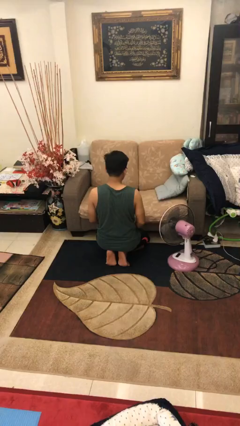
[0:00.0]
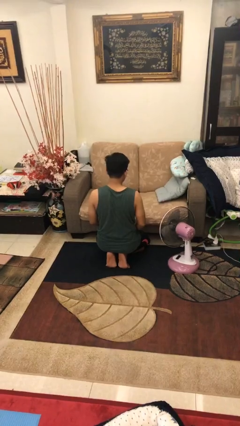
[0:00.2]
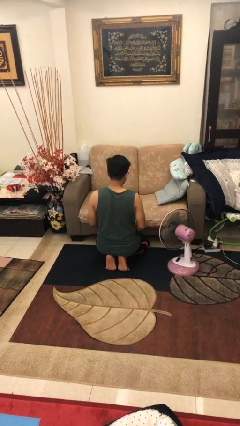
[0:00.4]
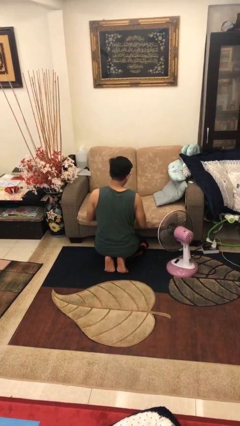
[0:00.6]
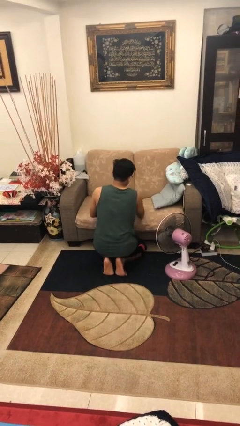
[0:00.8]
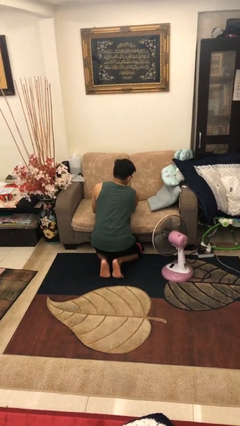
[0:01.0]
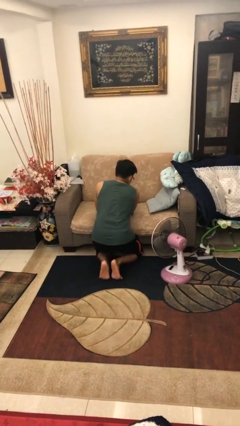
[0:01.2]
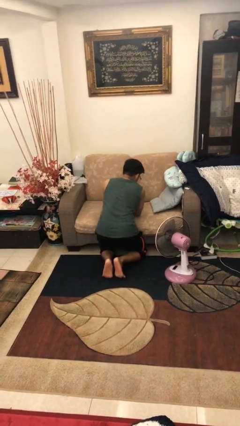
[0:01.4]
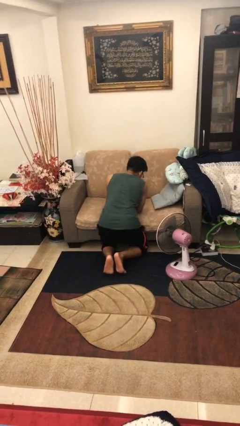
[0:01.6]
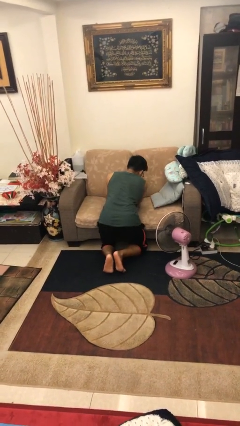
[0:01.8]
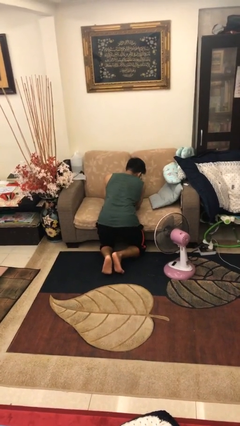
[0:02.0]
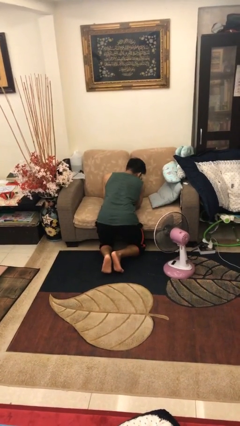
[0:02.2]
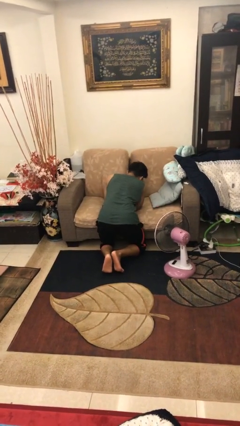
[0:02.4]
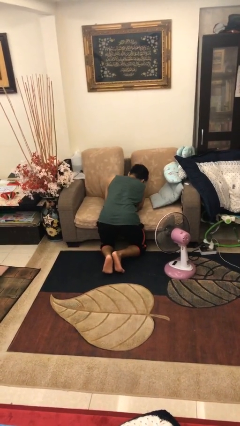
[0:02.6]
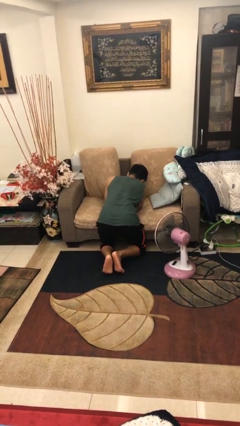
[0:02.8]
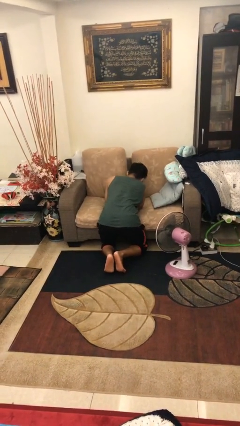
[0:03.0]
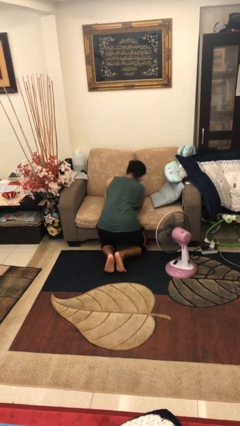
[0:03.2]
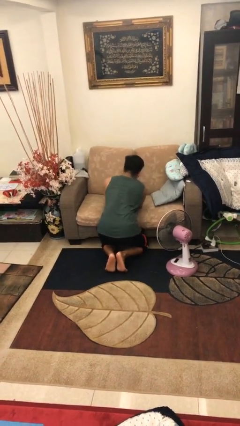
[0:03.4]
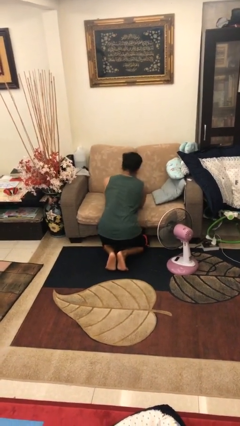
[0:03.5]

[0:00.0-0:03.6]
person searches in couch

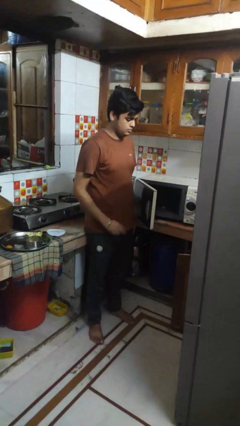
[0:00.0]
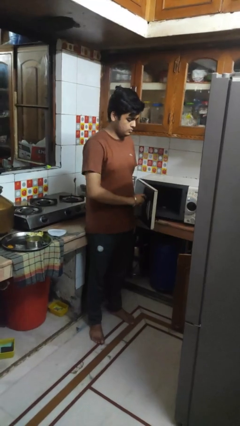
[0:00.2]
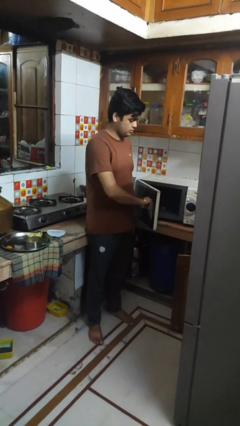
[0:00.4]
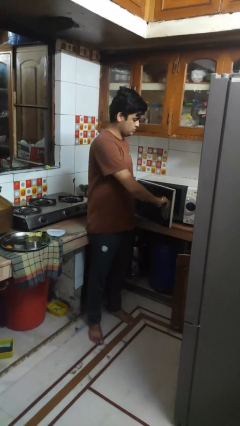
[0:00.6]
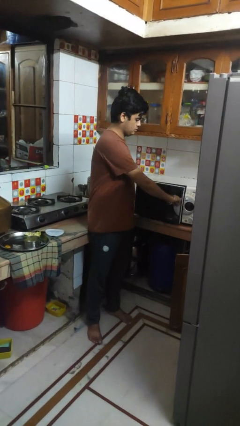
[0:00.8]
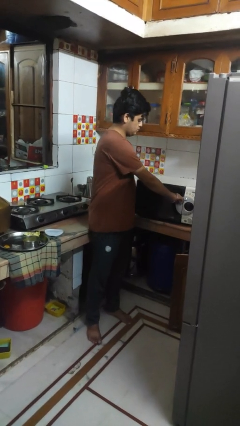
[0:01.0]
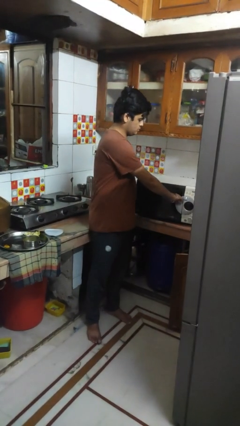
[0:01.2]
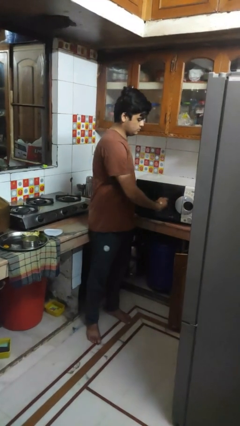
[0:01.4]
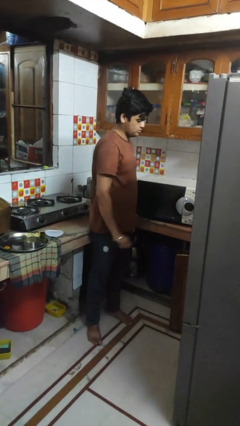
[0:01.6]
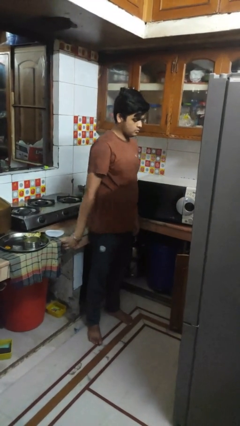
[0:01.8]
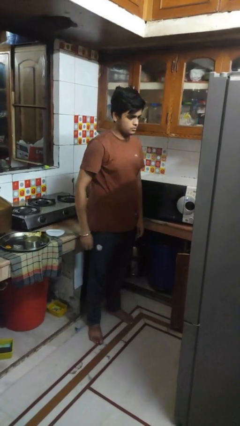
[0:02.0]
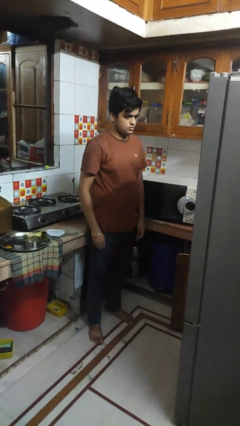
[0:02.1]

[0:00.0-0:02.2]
person closes oven door

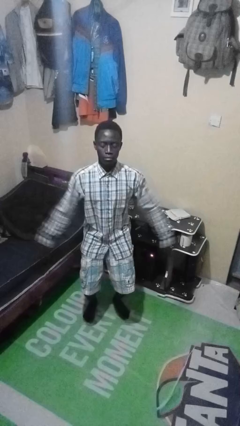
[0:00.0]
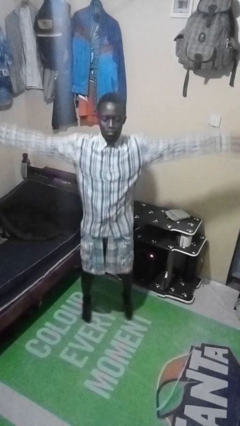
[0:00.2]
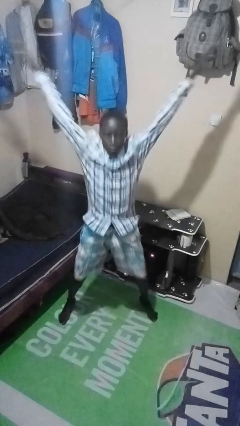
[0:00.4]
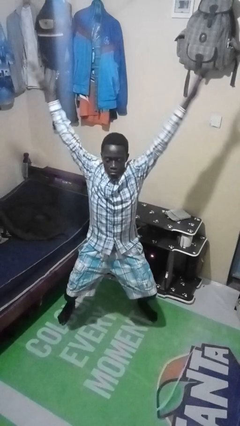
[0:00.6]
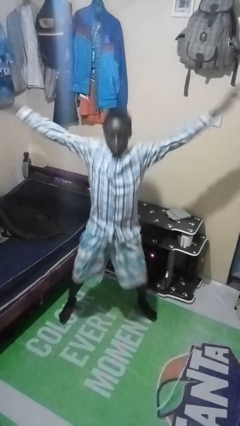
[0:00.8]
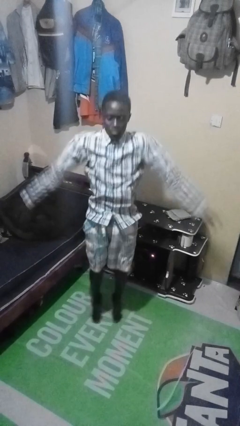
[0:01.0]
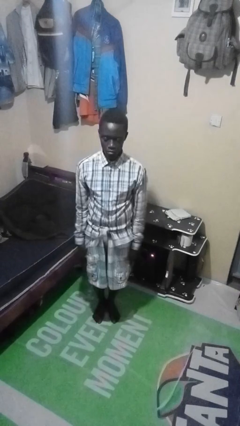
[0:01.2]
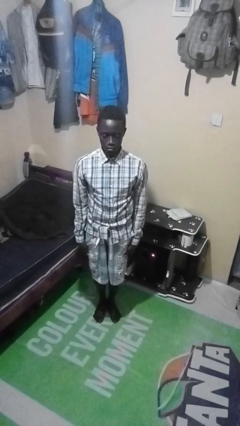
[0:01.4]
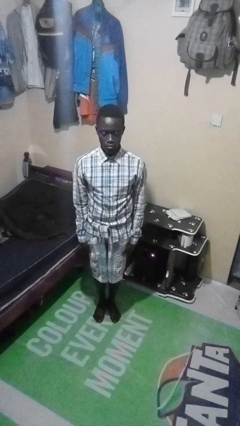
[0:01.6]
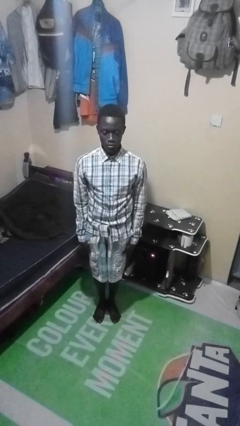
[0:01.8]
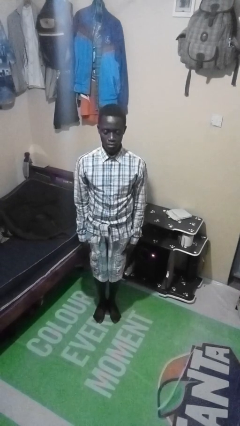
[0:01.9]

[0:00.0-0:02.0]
person exercises with jumping jacks

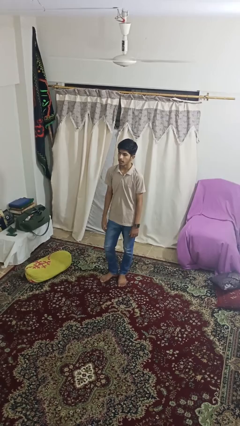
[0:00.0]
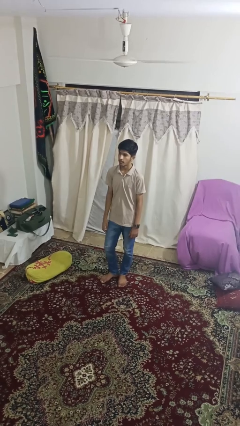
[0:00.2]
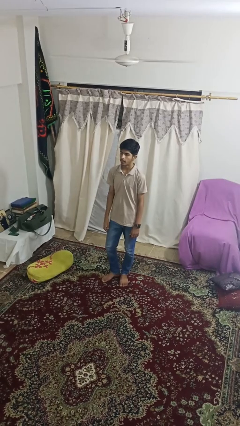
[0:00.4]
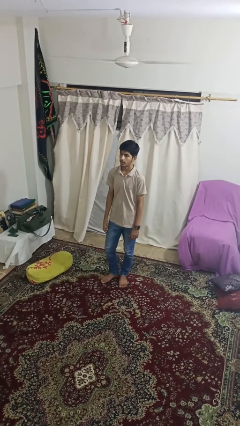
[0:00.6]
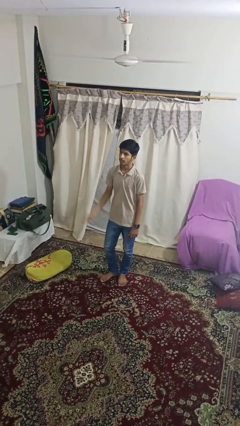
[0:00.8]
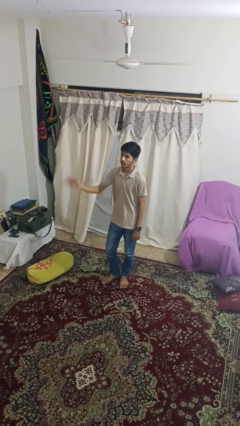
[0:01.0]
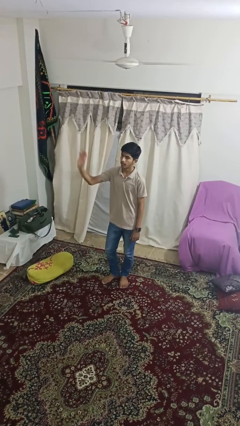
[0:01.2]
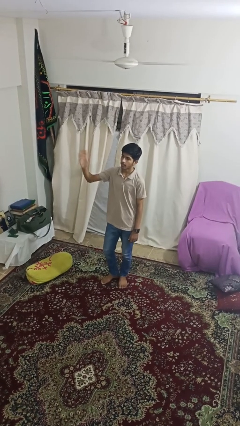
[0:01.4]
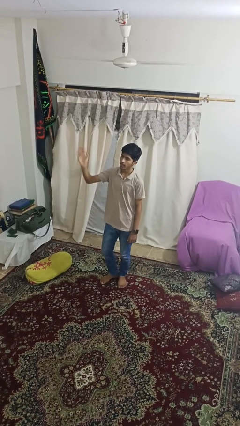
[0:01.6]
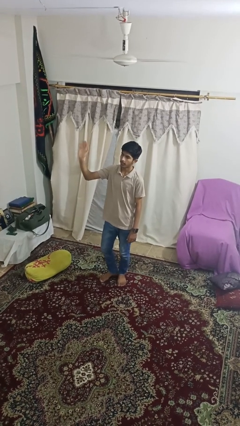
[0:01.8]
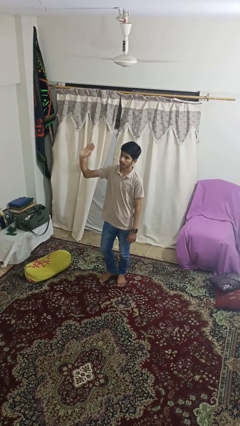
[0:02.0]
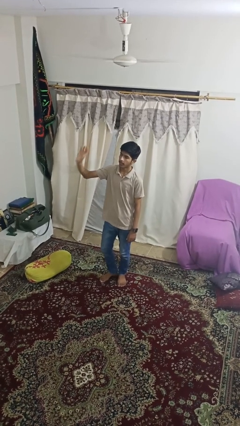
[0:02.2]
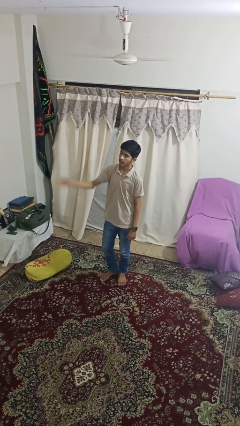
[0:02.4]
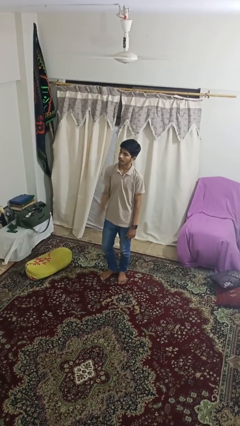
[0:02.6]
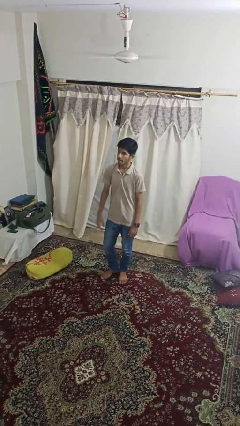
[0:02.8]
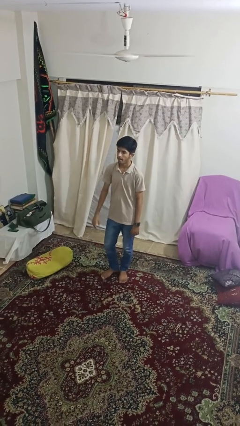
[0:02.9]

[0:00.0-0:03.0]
person waves at person

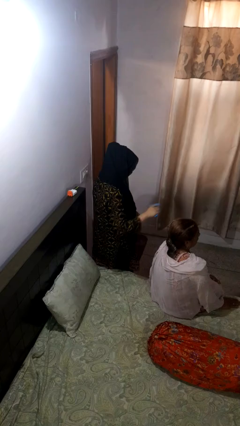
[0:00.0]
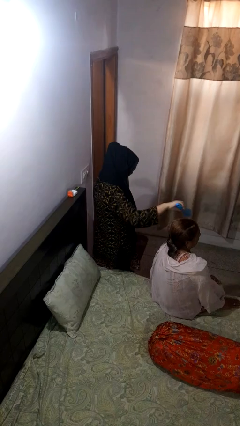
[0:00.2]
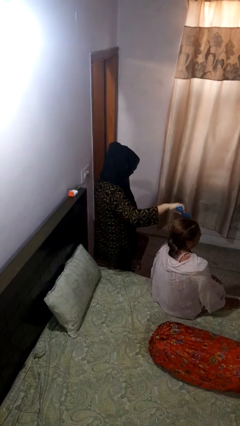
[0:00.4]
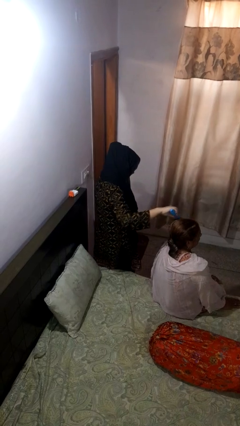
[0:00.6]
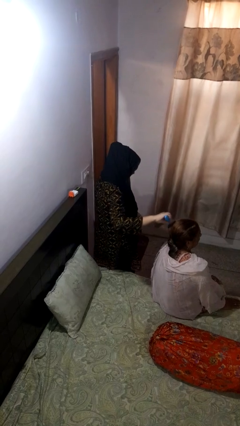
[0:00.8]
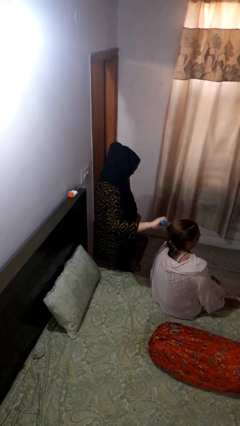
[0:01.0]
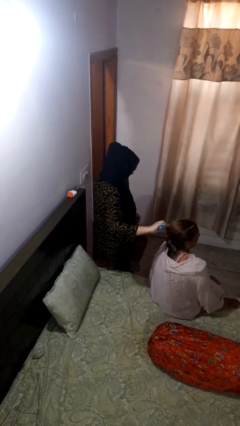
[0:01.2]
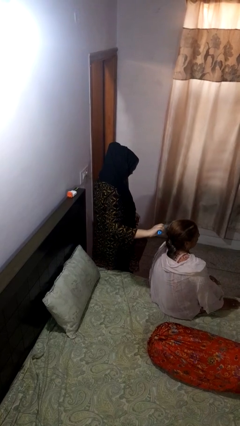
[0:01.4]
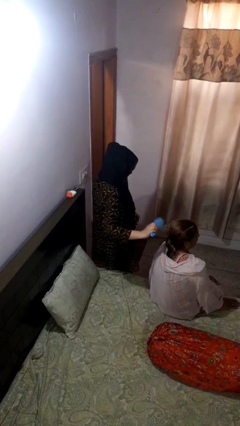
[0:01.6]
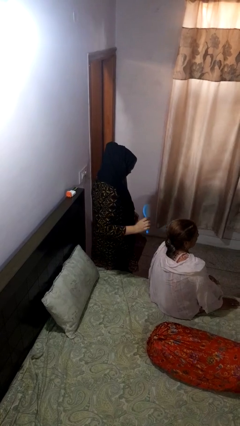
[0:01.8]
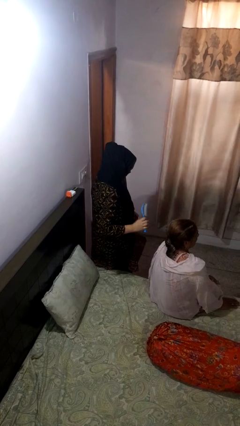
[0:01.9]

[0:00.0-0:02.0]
person brushes hair of person

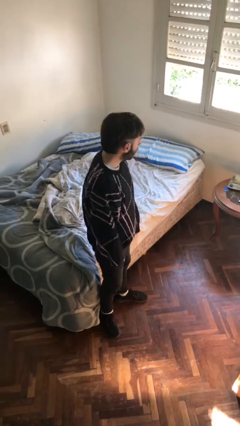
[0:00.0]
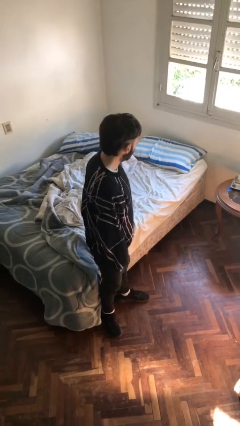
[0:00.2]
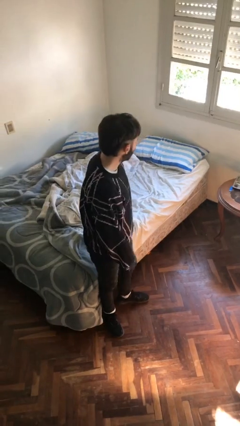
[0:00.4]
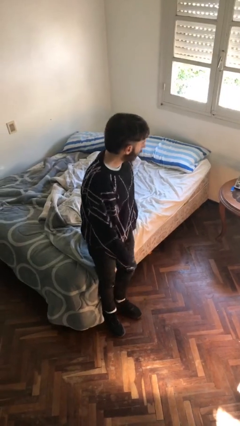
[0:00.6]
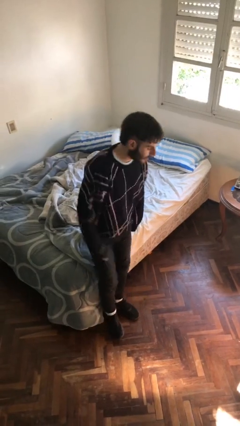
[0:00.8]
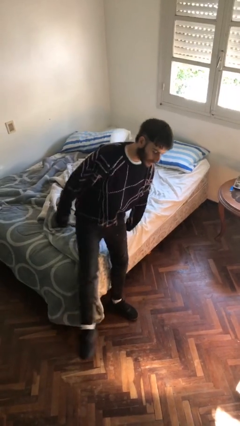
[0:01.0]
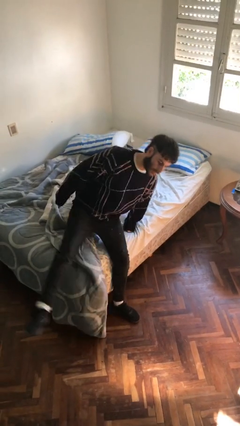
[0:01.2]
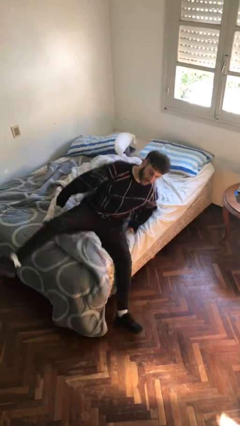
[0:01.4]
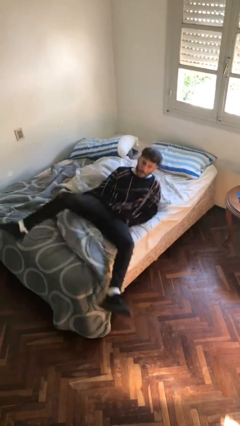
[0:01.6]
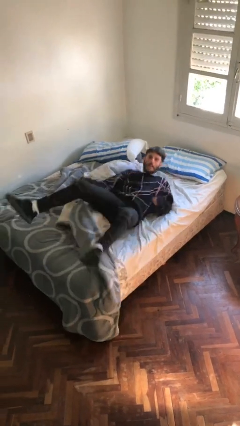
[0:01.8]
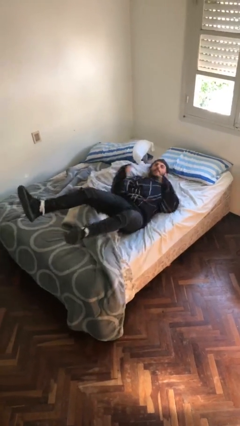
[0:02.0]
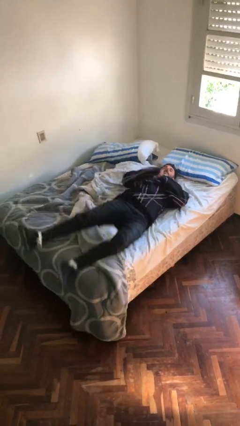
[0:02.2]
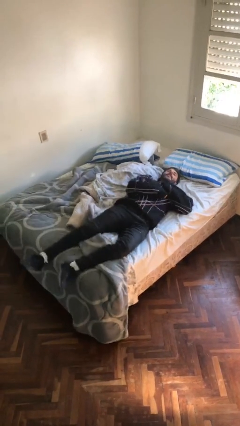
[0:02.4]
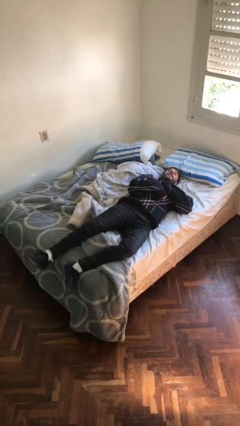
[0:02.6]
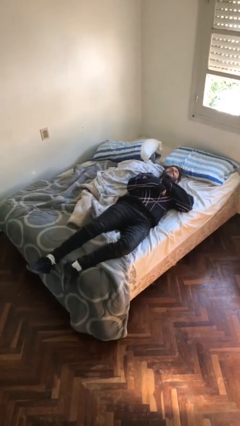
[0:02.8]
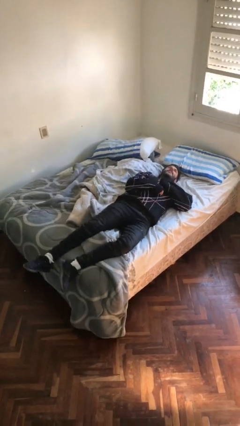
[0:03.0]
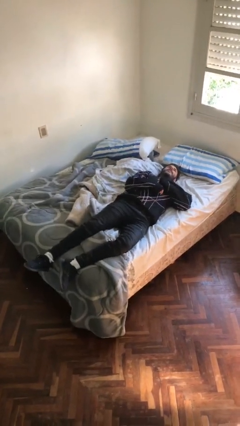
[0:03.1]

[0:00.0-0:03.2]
person lies down on bed

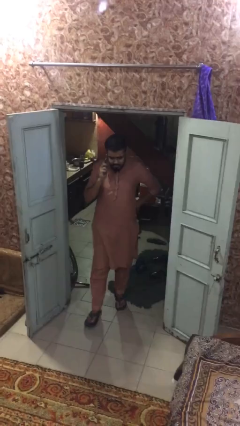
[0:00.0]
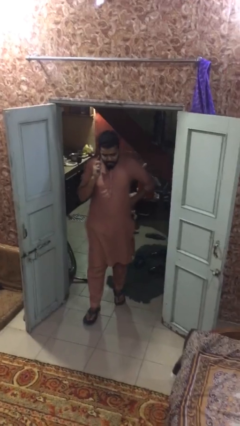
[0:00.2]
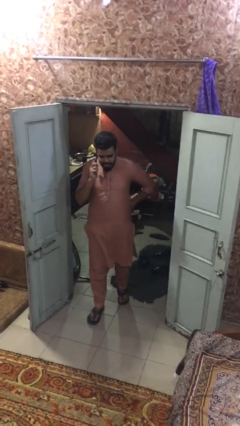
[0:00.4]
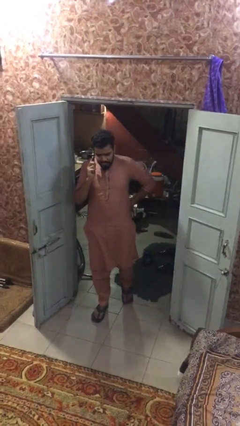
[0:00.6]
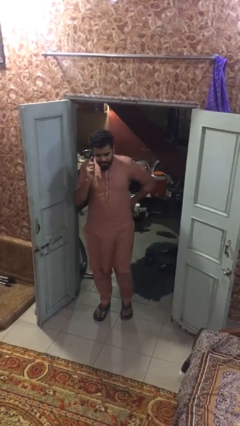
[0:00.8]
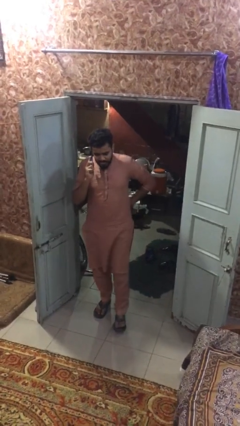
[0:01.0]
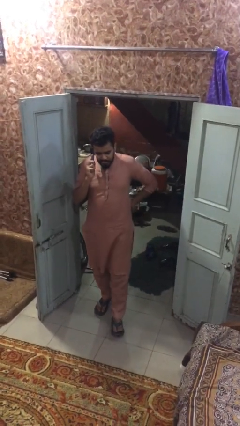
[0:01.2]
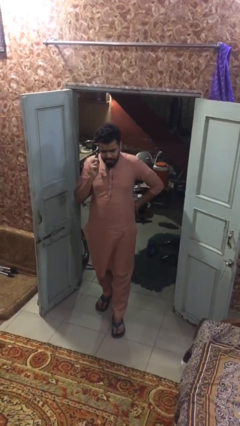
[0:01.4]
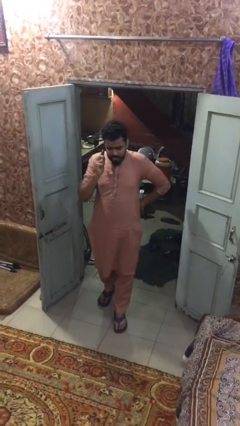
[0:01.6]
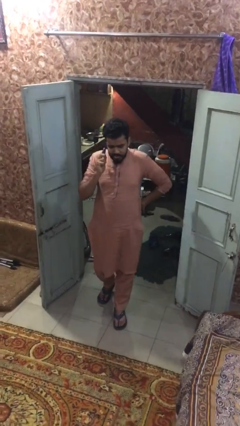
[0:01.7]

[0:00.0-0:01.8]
person enters scene through structure
